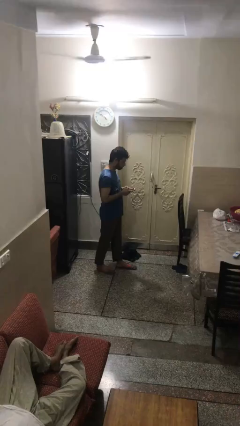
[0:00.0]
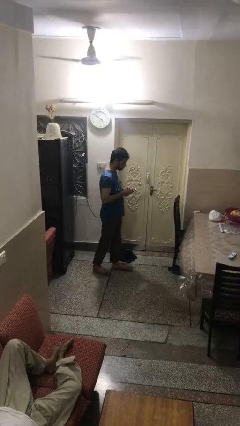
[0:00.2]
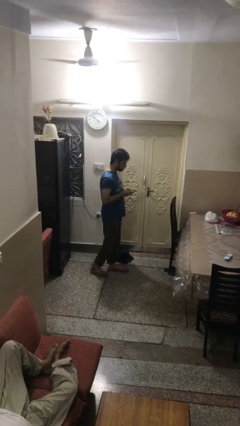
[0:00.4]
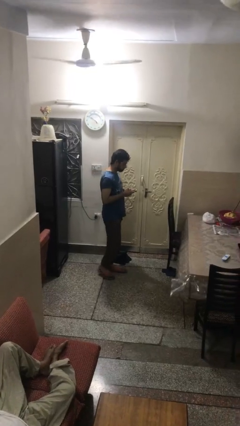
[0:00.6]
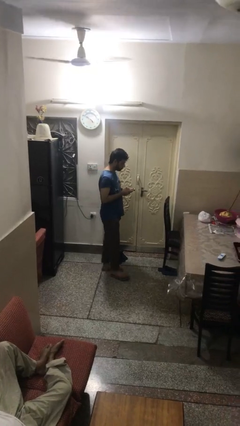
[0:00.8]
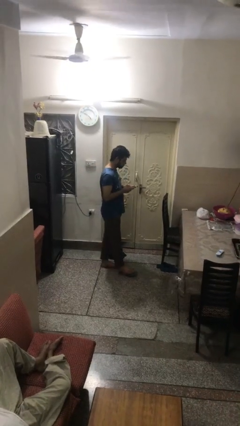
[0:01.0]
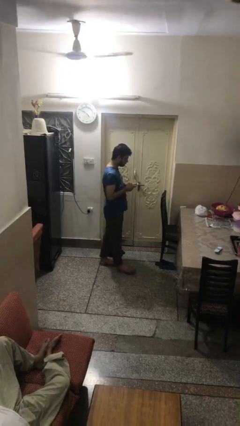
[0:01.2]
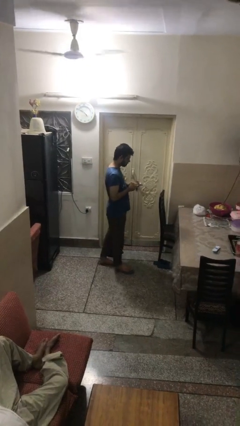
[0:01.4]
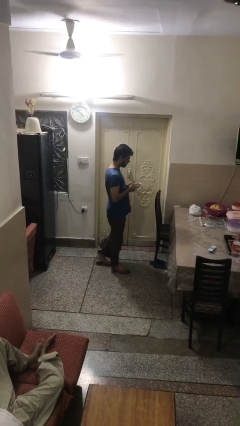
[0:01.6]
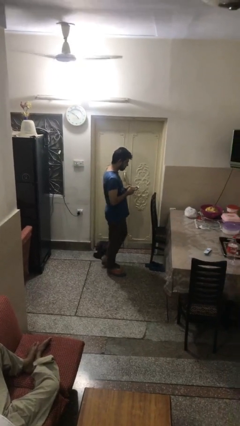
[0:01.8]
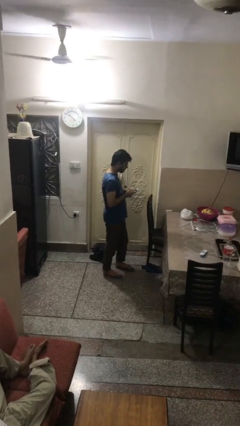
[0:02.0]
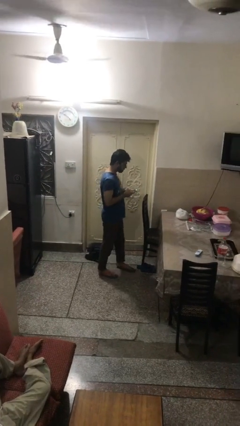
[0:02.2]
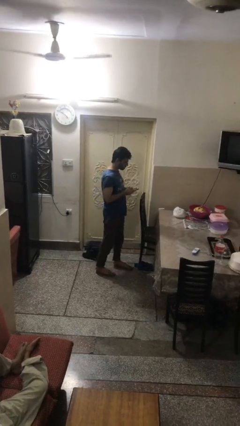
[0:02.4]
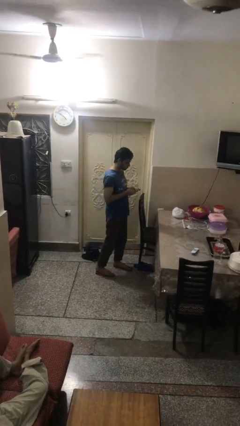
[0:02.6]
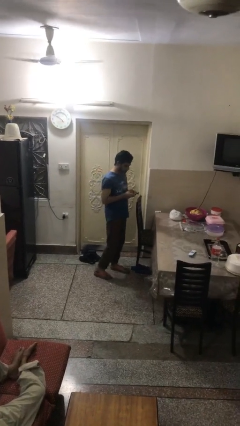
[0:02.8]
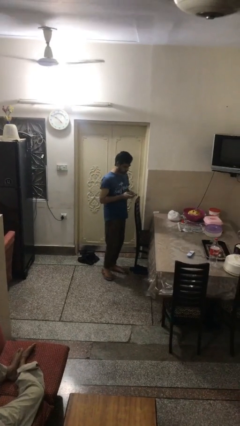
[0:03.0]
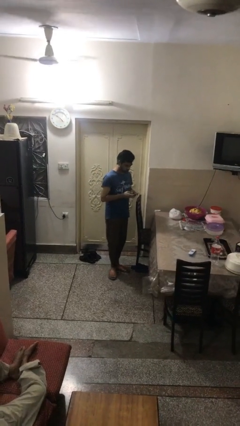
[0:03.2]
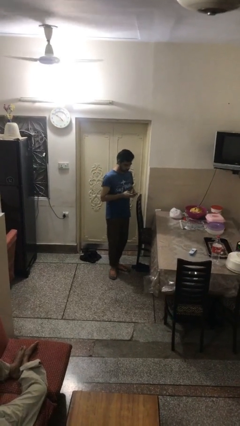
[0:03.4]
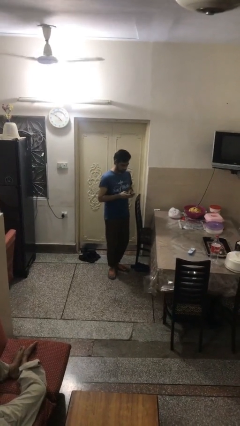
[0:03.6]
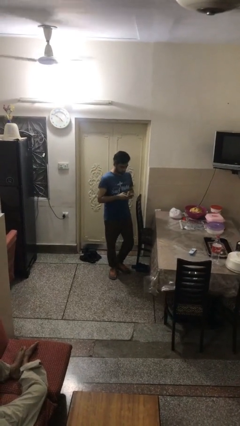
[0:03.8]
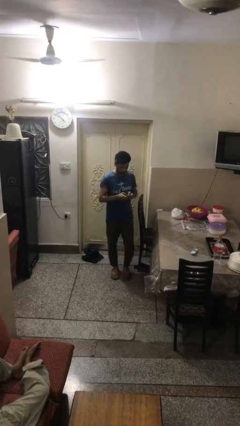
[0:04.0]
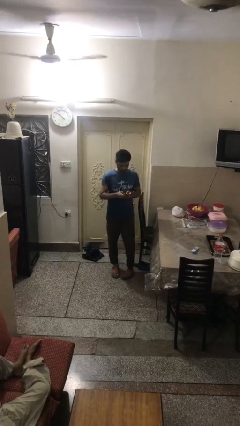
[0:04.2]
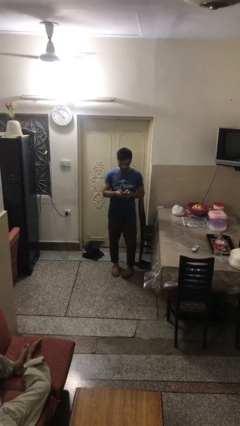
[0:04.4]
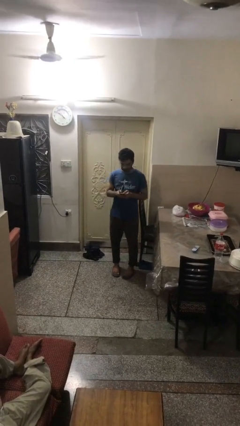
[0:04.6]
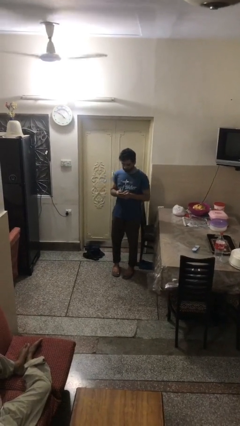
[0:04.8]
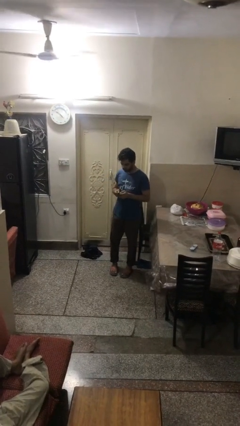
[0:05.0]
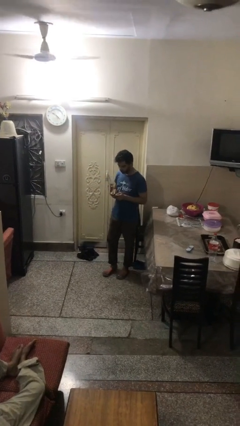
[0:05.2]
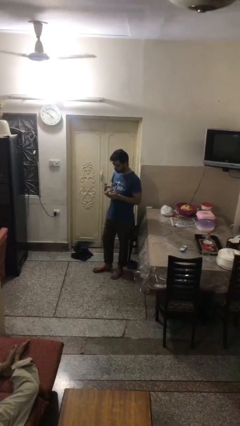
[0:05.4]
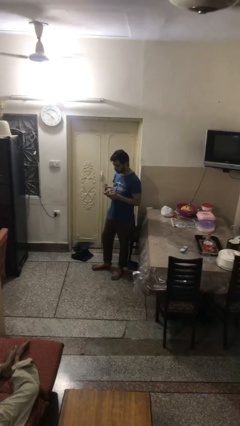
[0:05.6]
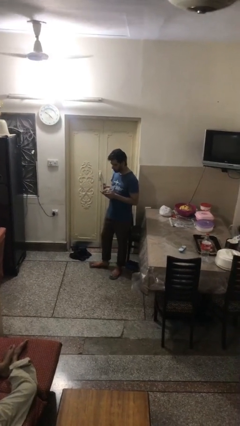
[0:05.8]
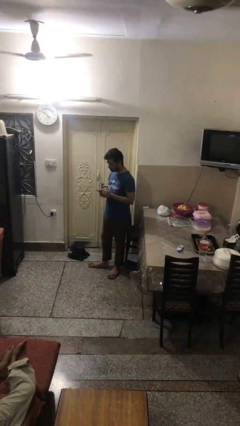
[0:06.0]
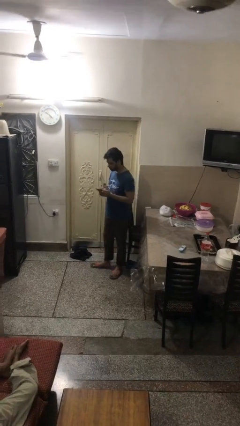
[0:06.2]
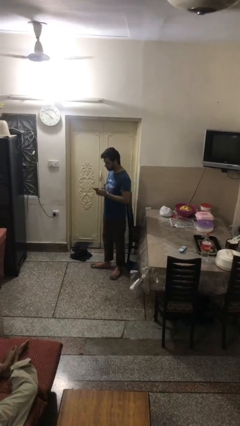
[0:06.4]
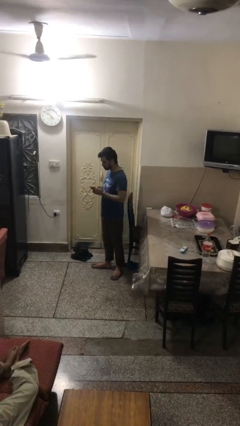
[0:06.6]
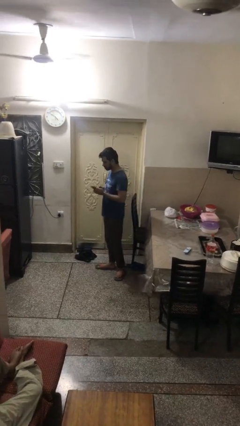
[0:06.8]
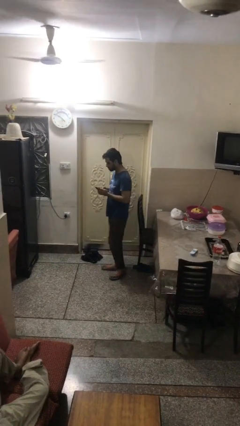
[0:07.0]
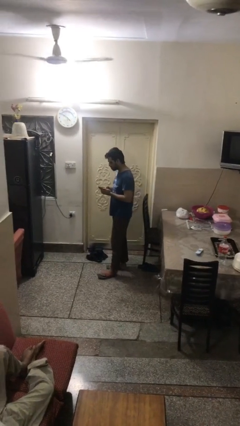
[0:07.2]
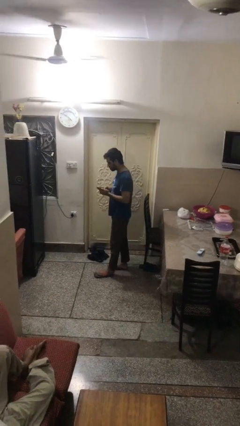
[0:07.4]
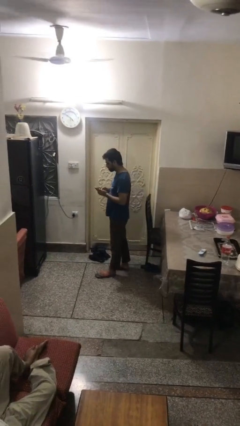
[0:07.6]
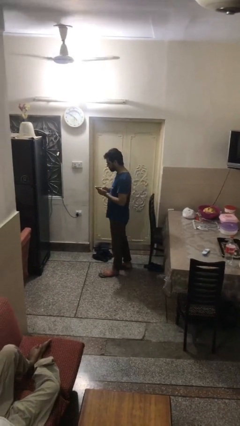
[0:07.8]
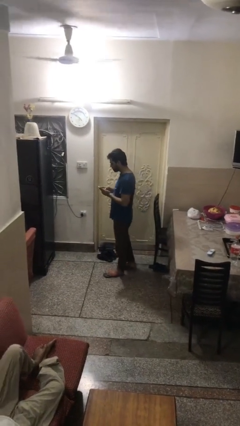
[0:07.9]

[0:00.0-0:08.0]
person texts on phone

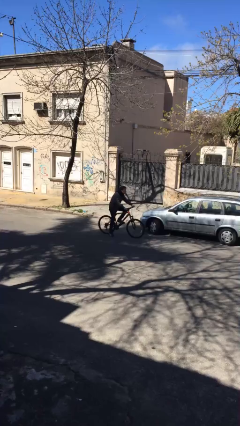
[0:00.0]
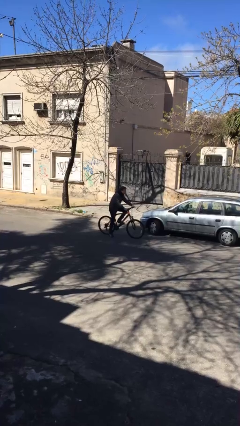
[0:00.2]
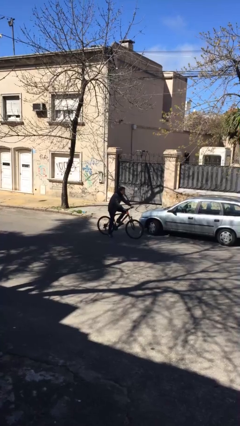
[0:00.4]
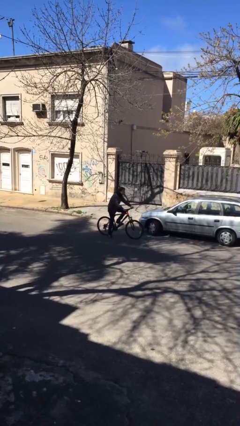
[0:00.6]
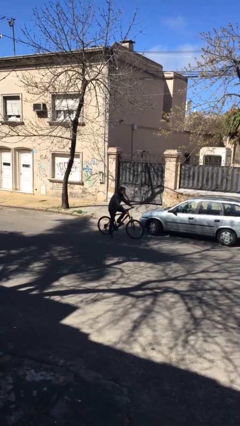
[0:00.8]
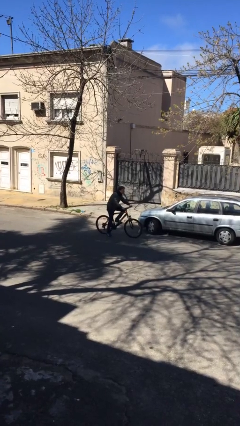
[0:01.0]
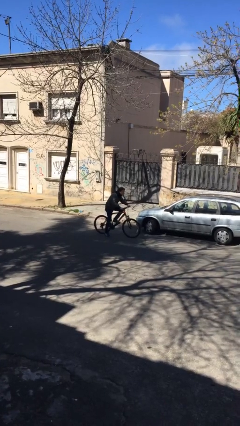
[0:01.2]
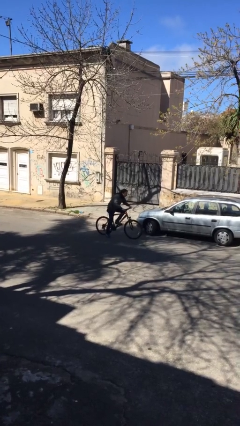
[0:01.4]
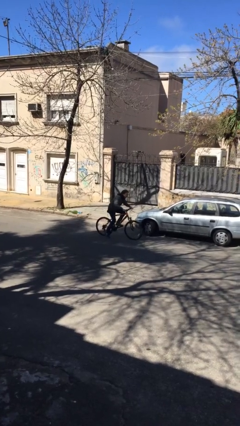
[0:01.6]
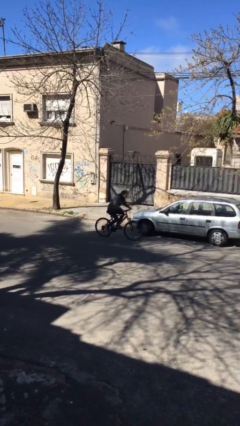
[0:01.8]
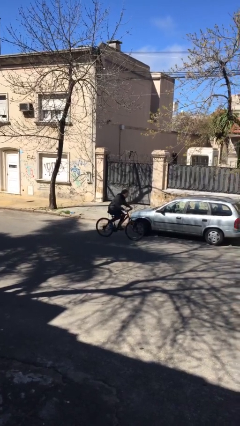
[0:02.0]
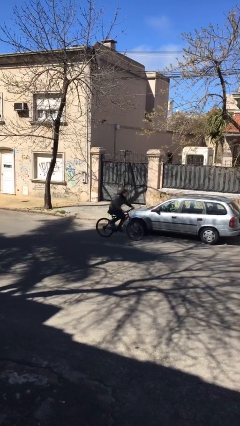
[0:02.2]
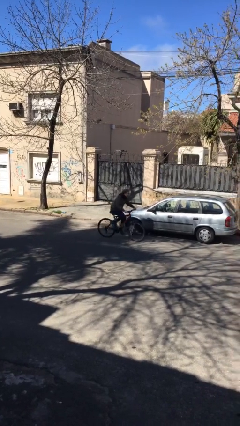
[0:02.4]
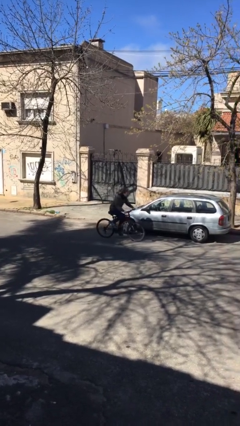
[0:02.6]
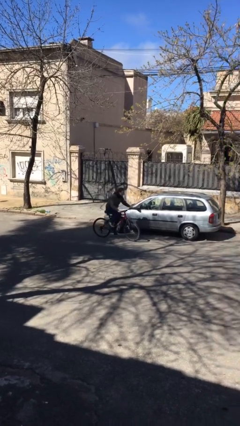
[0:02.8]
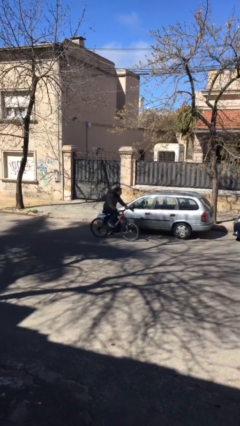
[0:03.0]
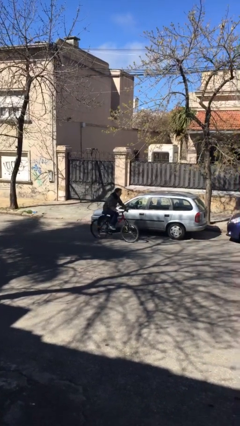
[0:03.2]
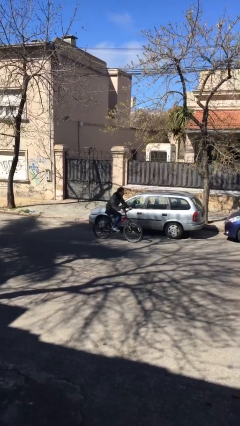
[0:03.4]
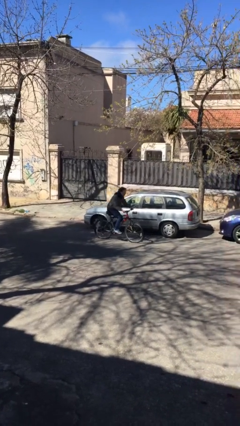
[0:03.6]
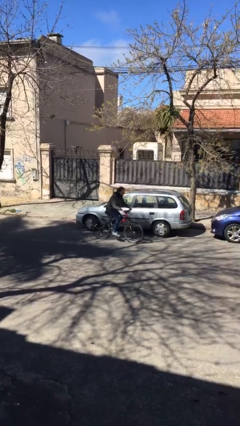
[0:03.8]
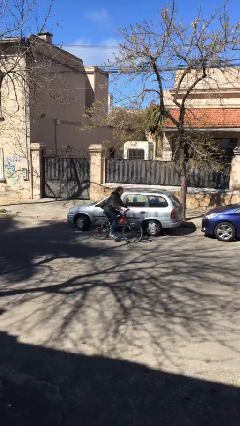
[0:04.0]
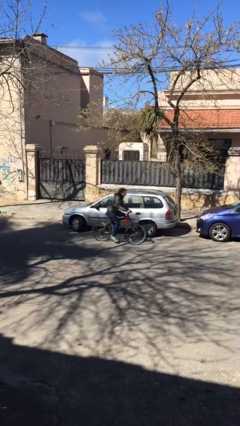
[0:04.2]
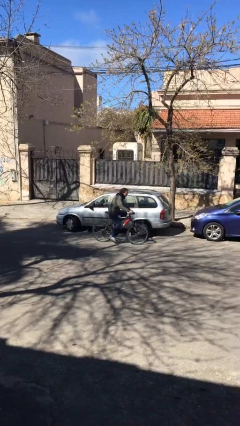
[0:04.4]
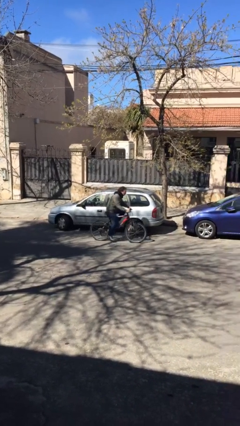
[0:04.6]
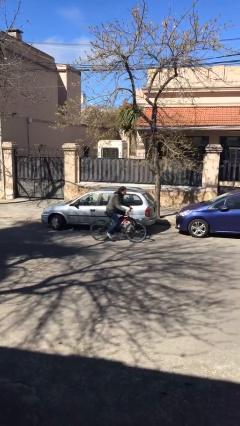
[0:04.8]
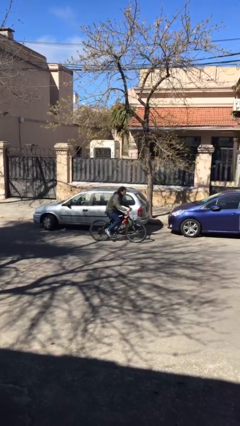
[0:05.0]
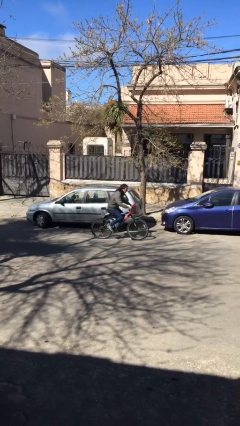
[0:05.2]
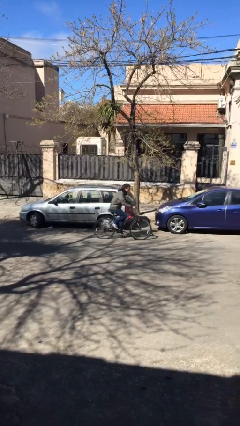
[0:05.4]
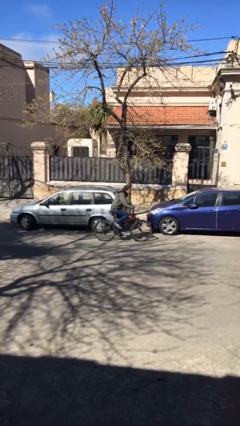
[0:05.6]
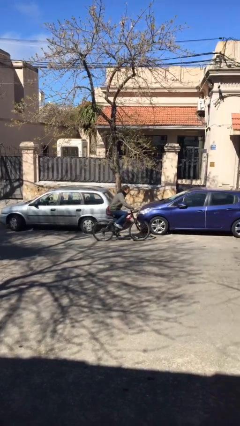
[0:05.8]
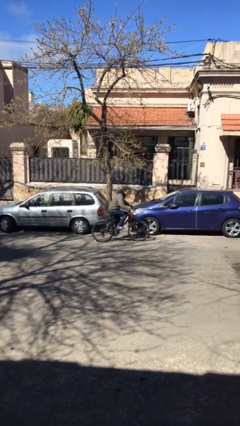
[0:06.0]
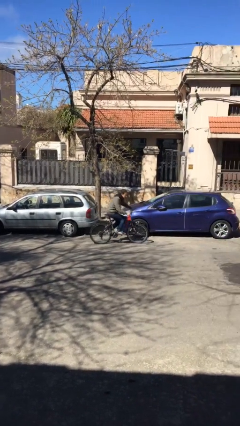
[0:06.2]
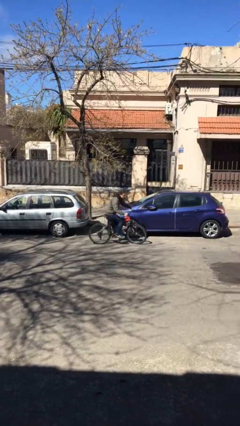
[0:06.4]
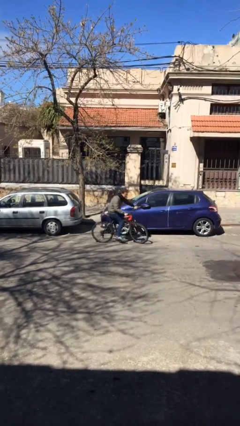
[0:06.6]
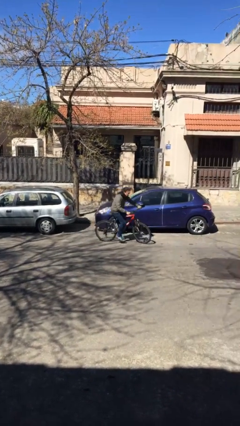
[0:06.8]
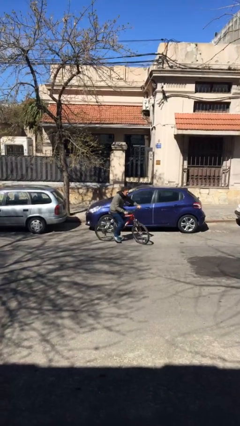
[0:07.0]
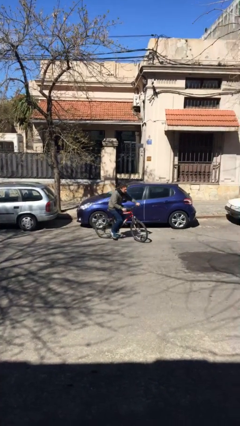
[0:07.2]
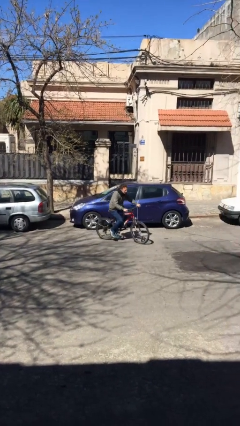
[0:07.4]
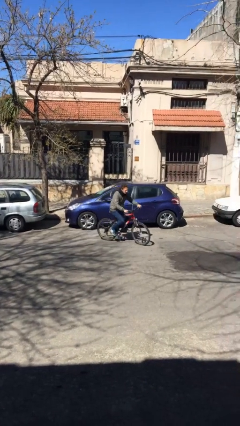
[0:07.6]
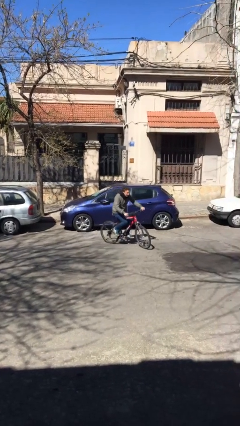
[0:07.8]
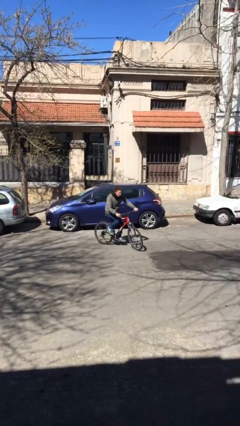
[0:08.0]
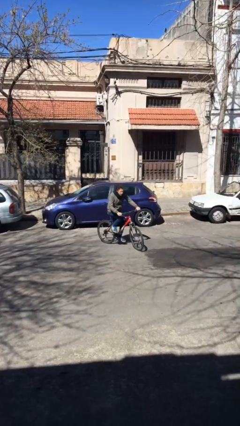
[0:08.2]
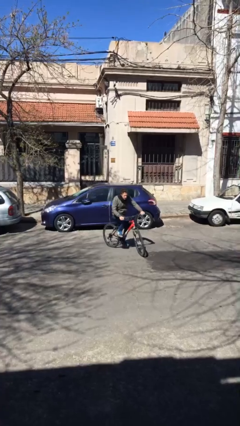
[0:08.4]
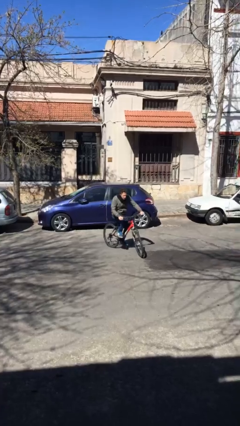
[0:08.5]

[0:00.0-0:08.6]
person rides bicycle

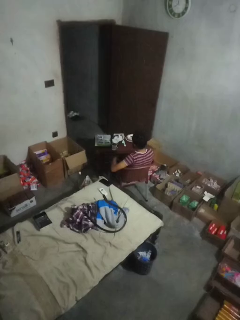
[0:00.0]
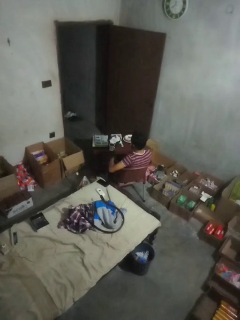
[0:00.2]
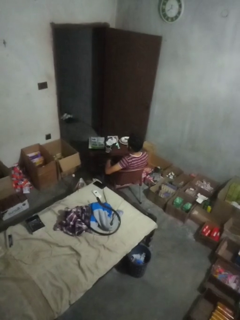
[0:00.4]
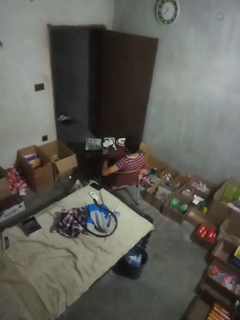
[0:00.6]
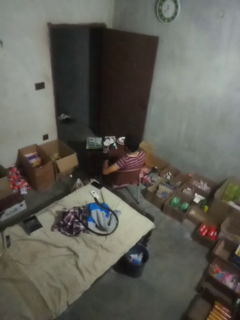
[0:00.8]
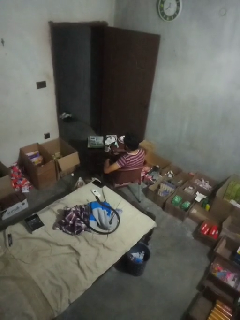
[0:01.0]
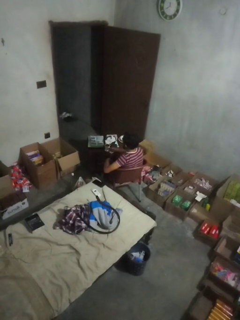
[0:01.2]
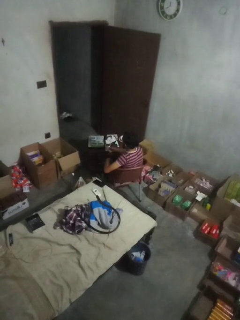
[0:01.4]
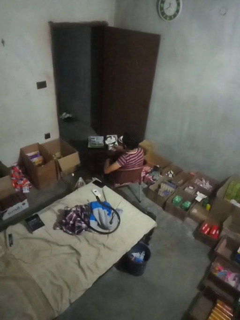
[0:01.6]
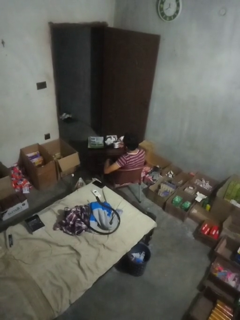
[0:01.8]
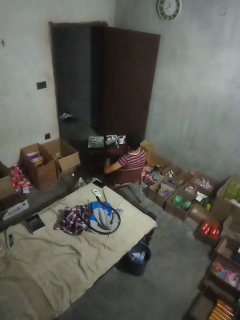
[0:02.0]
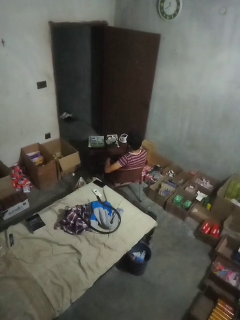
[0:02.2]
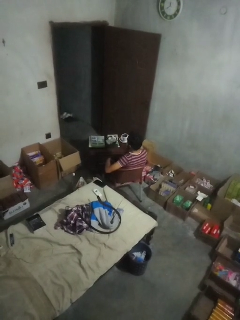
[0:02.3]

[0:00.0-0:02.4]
person picks up object from table
